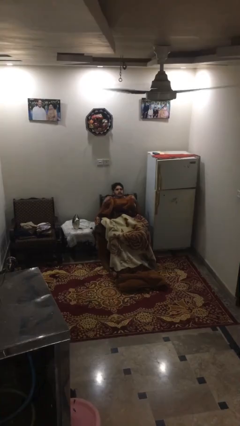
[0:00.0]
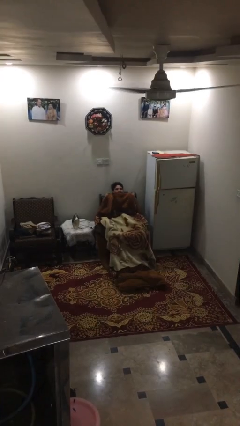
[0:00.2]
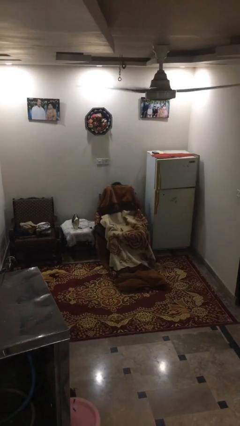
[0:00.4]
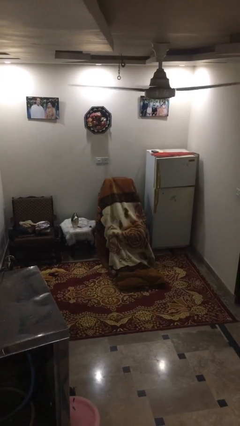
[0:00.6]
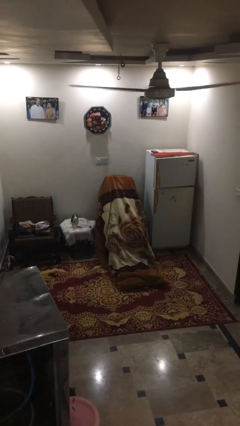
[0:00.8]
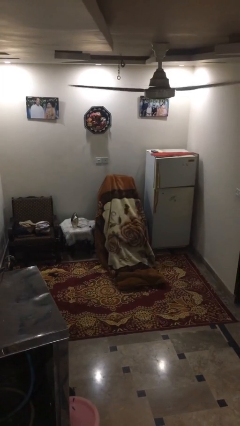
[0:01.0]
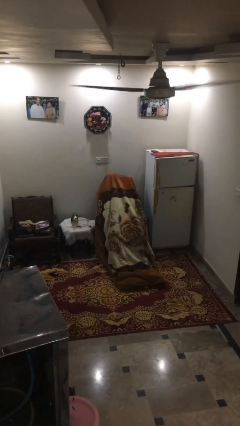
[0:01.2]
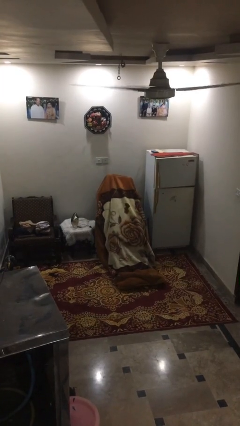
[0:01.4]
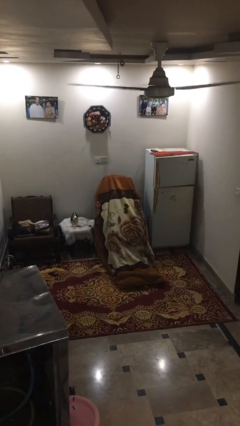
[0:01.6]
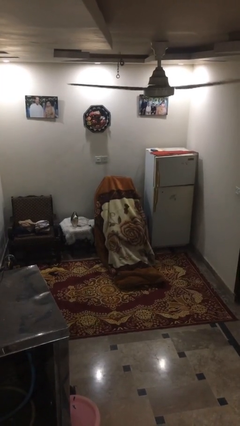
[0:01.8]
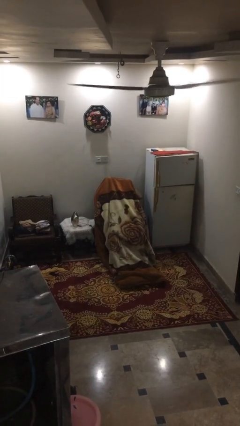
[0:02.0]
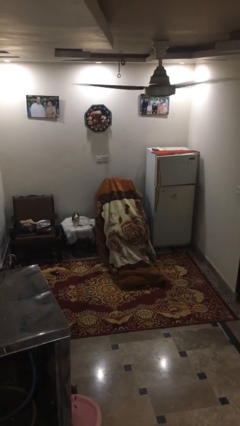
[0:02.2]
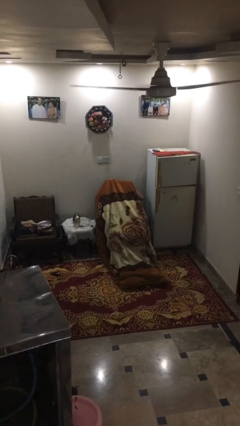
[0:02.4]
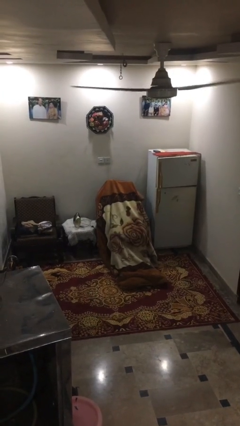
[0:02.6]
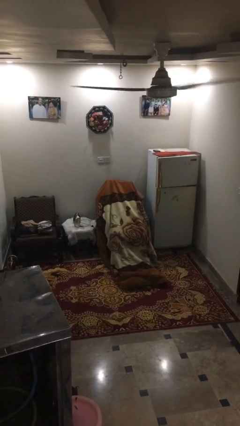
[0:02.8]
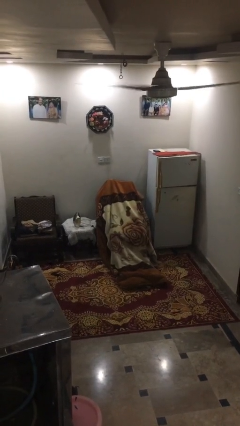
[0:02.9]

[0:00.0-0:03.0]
person covers with blanket

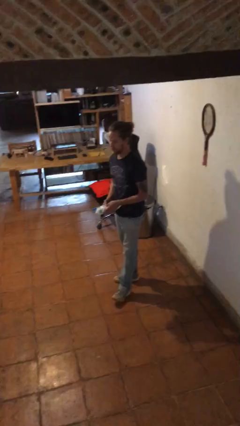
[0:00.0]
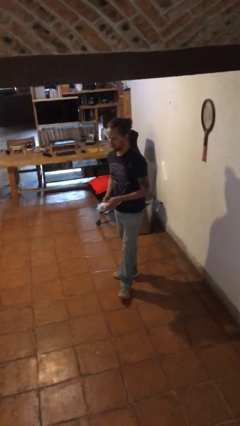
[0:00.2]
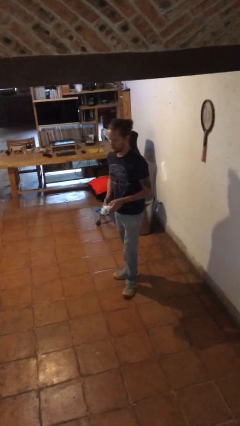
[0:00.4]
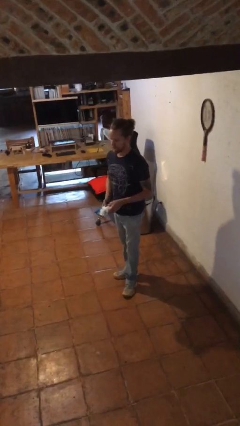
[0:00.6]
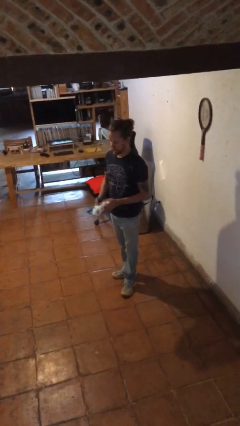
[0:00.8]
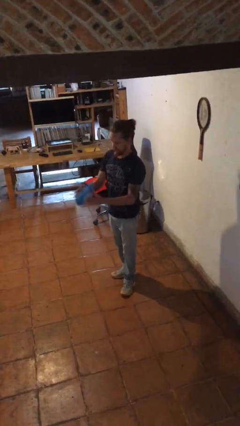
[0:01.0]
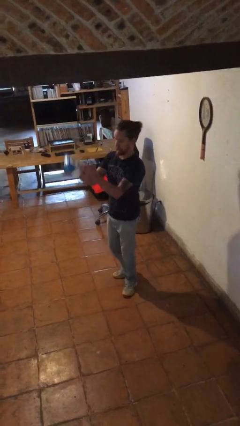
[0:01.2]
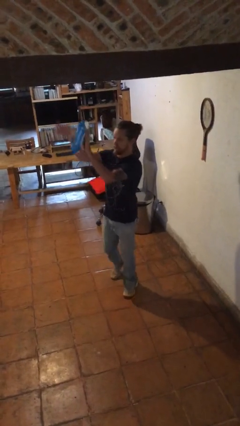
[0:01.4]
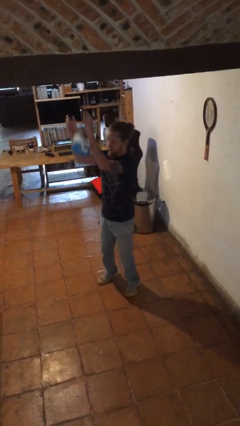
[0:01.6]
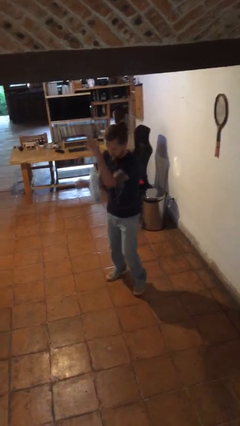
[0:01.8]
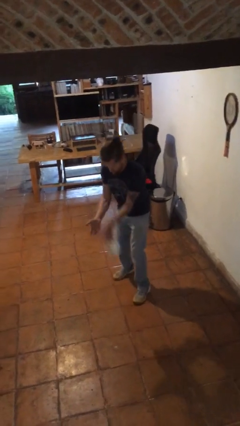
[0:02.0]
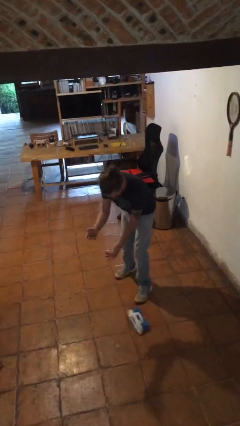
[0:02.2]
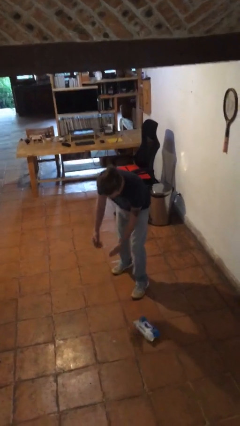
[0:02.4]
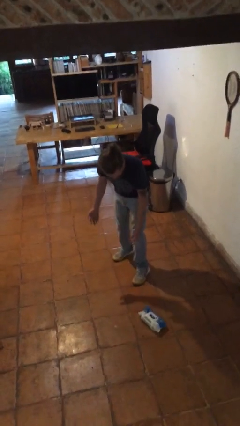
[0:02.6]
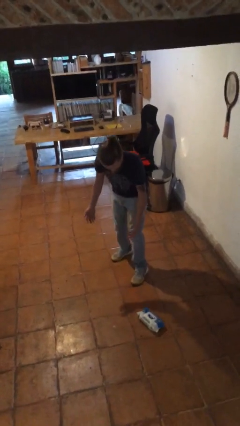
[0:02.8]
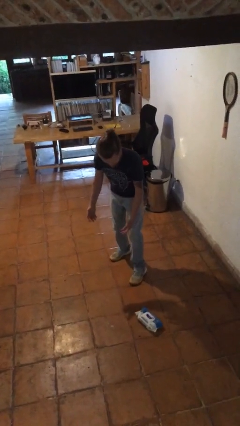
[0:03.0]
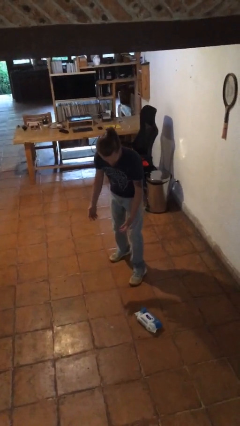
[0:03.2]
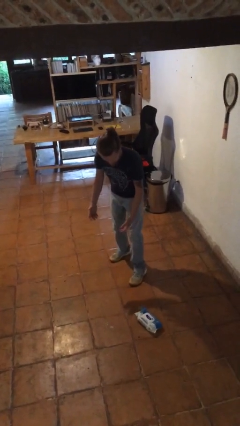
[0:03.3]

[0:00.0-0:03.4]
person drops object

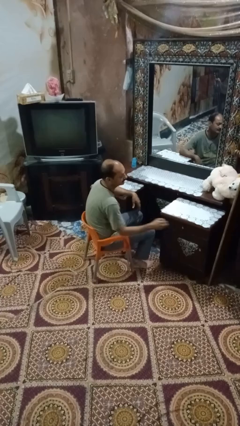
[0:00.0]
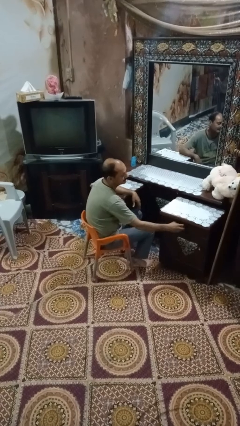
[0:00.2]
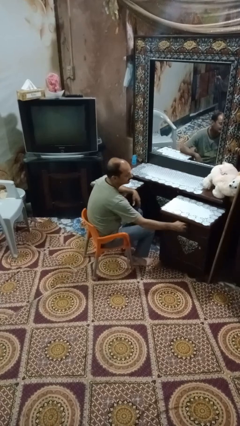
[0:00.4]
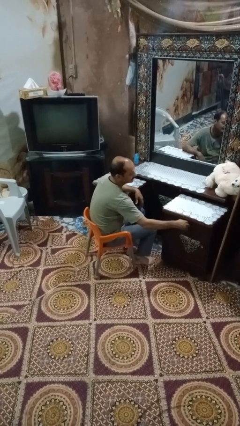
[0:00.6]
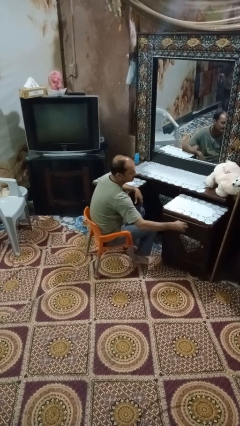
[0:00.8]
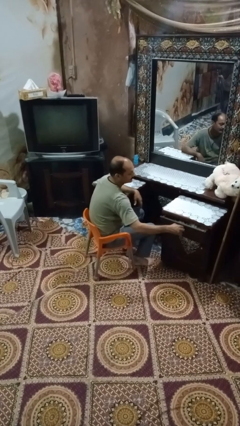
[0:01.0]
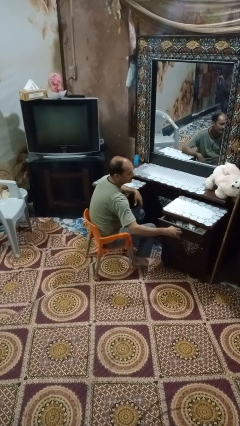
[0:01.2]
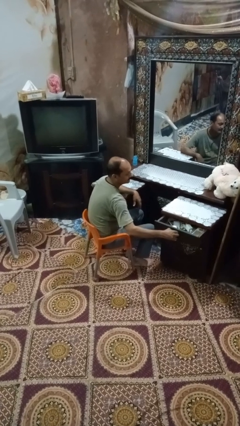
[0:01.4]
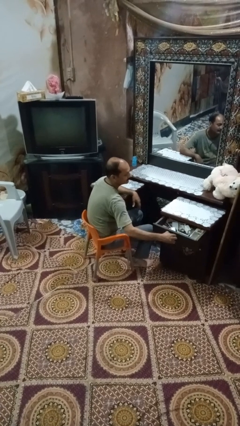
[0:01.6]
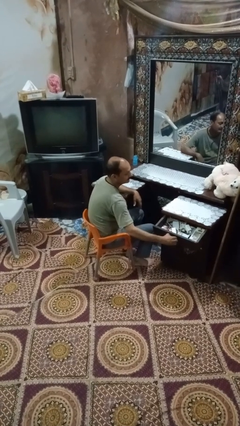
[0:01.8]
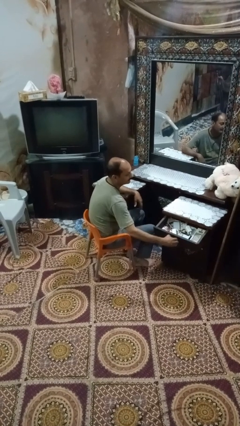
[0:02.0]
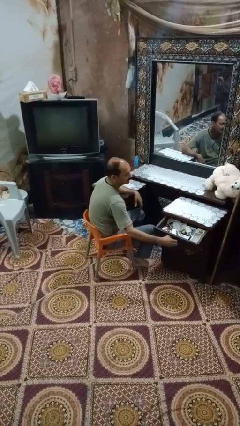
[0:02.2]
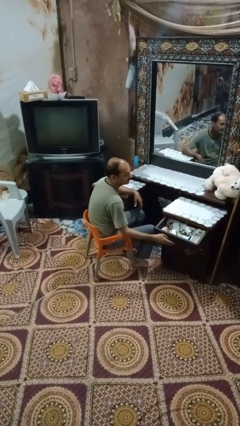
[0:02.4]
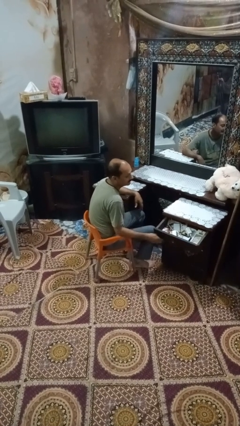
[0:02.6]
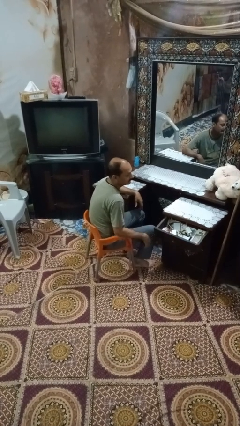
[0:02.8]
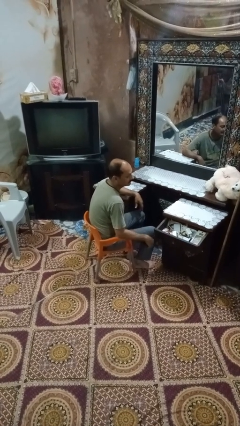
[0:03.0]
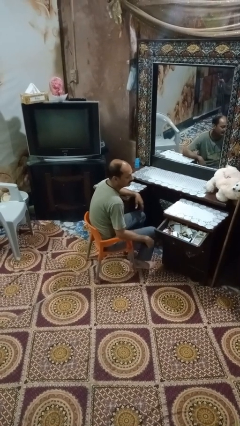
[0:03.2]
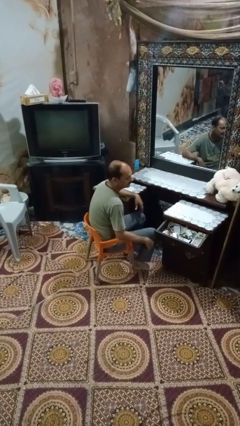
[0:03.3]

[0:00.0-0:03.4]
person opens dresser drawer

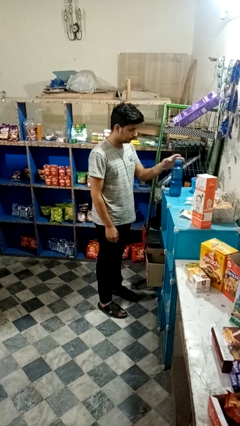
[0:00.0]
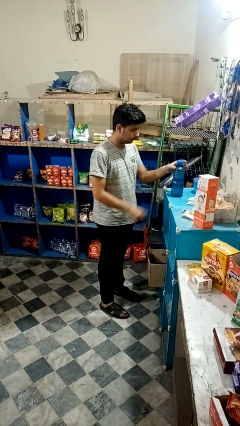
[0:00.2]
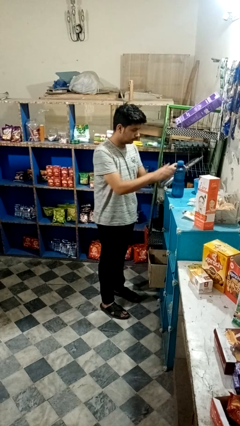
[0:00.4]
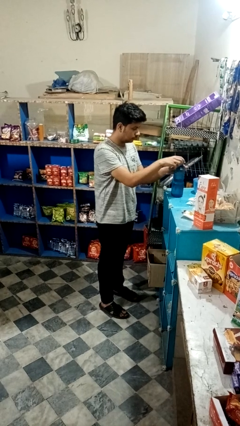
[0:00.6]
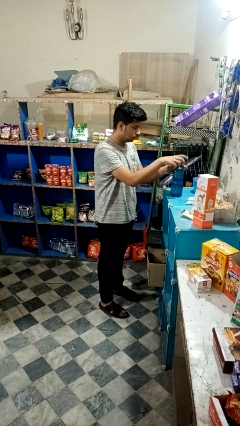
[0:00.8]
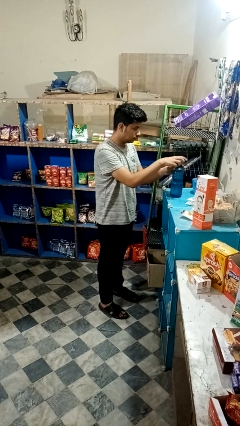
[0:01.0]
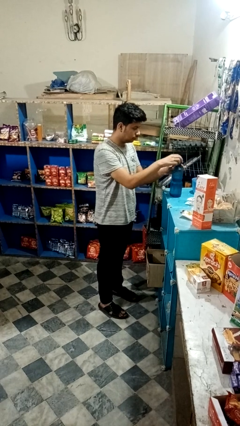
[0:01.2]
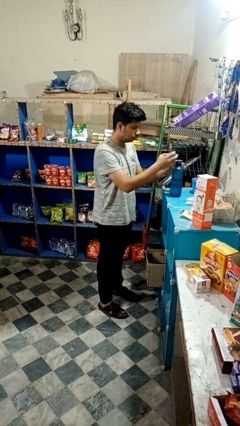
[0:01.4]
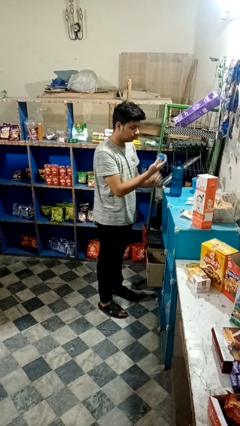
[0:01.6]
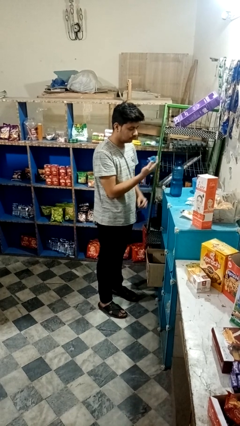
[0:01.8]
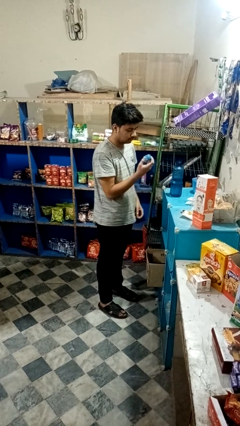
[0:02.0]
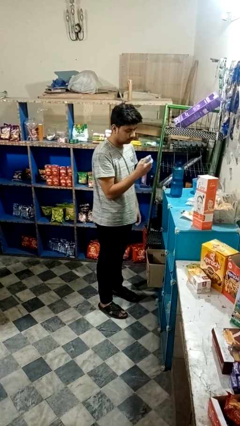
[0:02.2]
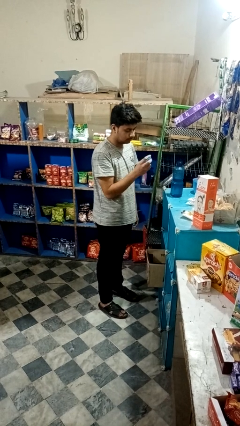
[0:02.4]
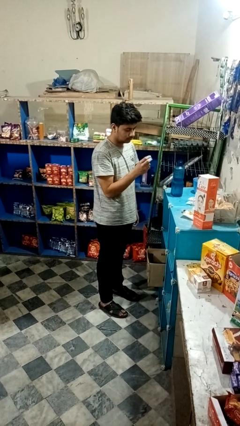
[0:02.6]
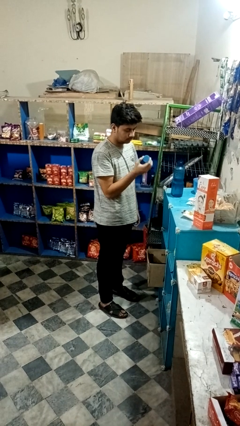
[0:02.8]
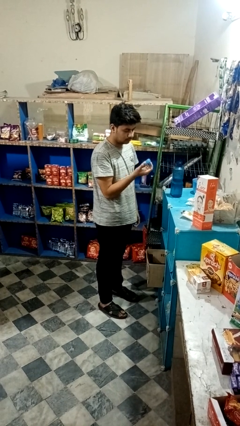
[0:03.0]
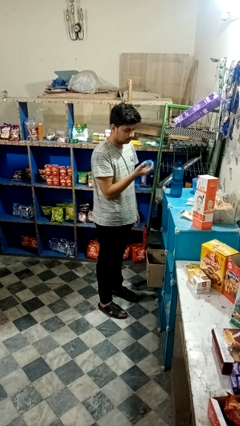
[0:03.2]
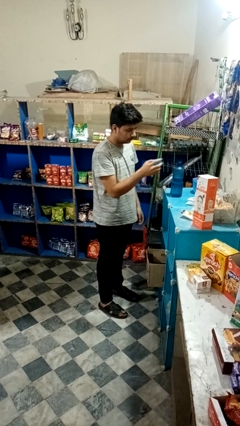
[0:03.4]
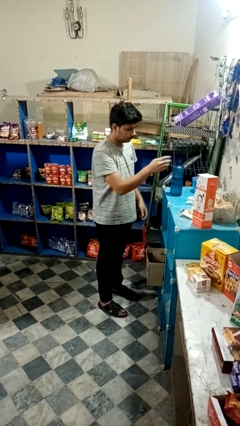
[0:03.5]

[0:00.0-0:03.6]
person unscrews lid from bottle

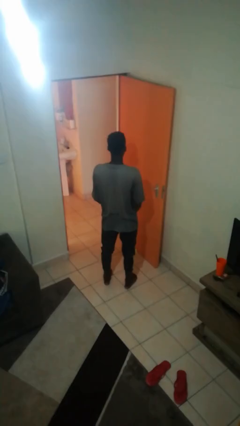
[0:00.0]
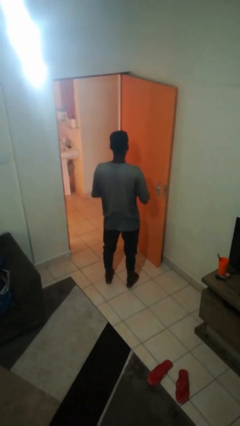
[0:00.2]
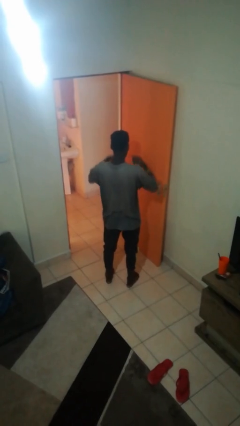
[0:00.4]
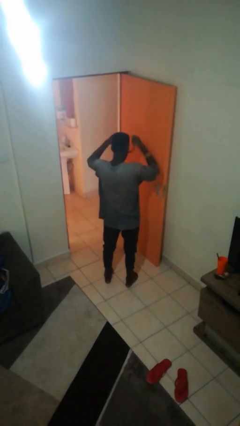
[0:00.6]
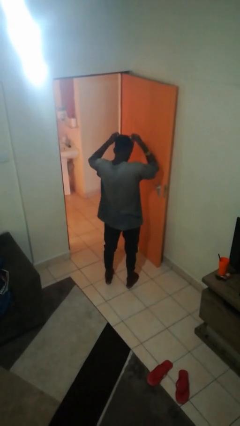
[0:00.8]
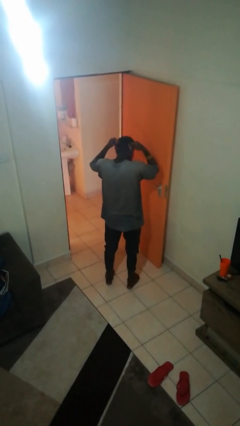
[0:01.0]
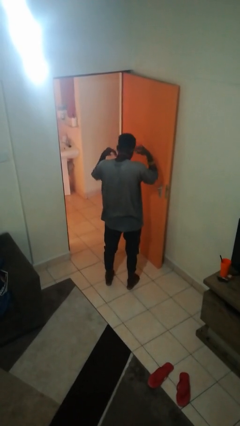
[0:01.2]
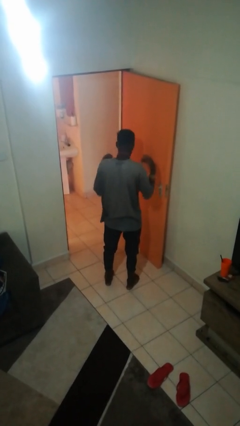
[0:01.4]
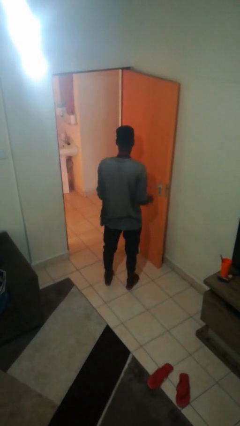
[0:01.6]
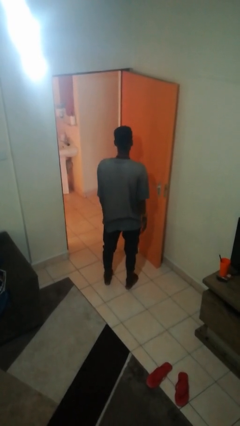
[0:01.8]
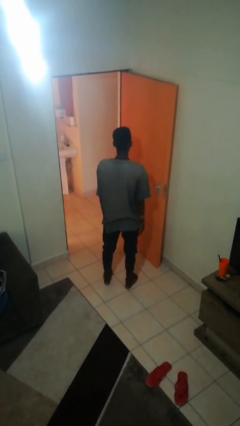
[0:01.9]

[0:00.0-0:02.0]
person puts on necklace

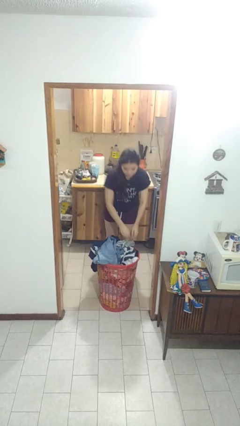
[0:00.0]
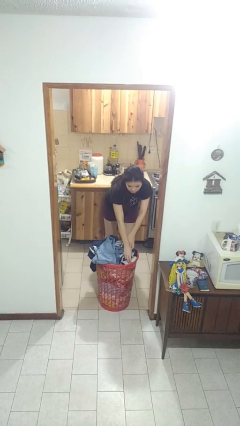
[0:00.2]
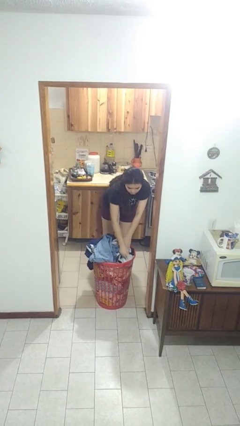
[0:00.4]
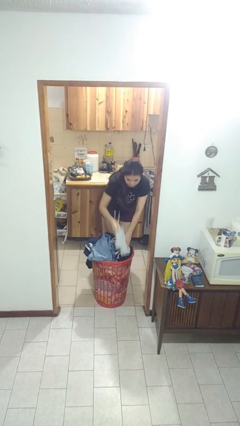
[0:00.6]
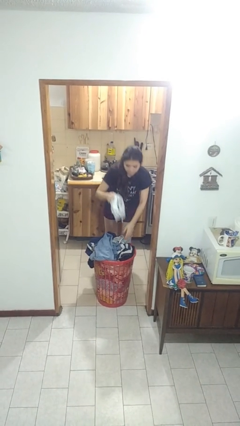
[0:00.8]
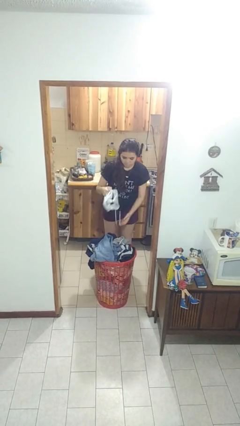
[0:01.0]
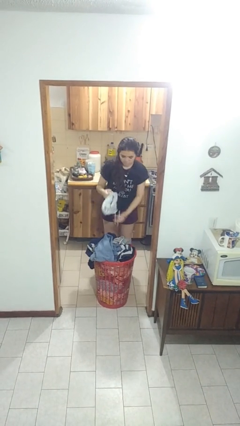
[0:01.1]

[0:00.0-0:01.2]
person takes object from basket

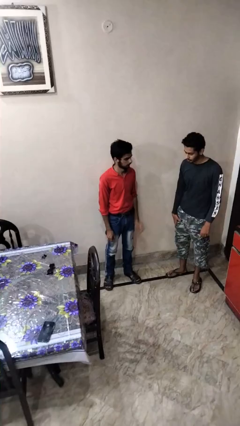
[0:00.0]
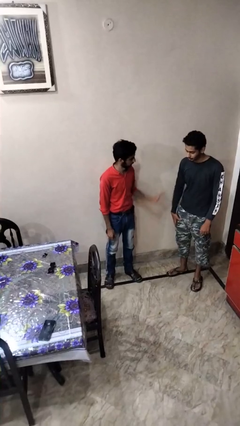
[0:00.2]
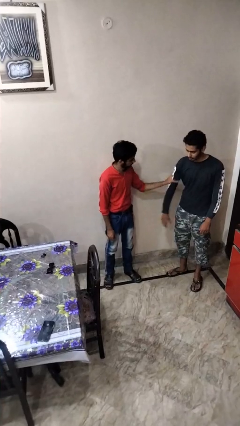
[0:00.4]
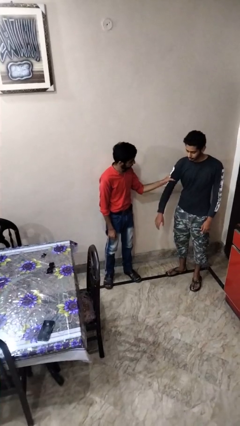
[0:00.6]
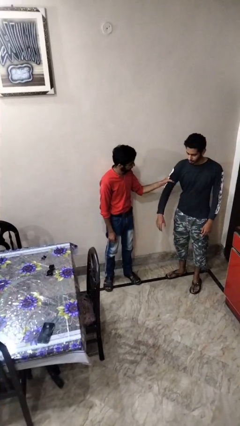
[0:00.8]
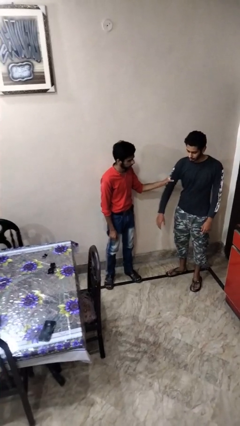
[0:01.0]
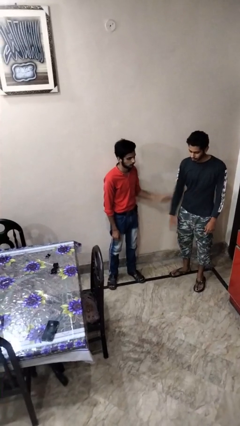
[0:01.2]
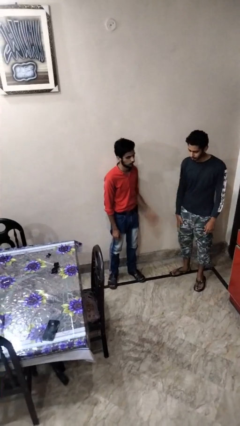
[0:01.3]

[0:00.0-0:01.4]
person grabs person by bicep
